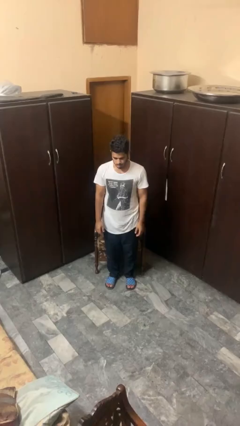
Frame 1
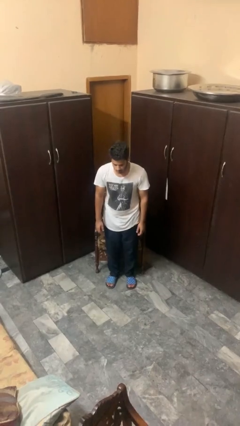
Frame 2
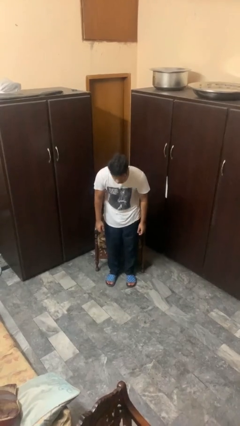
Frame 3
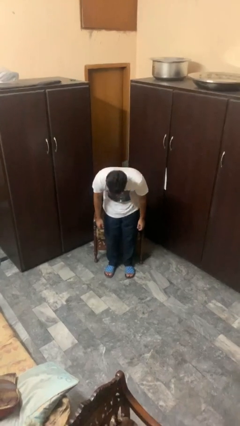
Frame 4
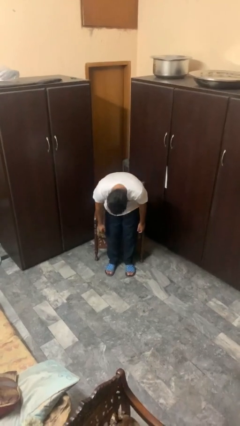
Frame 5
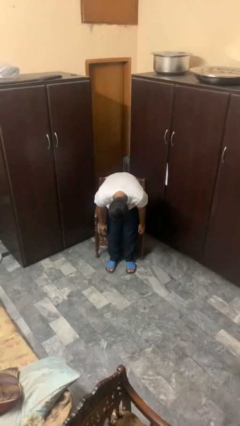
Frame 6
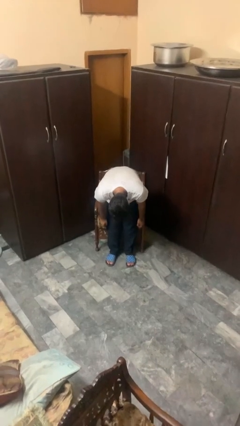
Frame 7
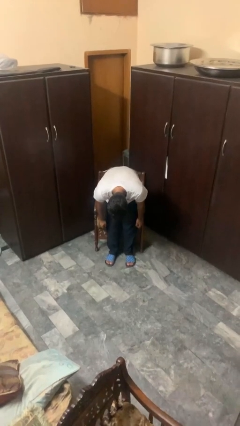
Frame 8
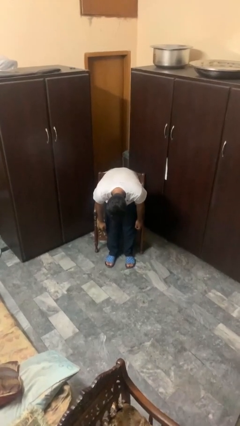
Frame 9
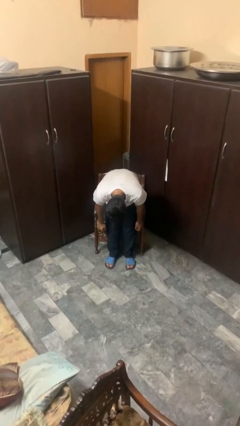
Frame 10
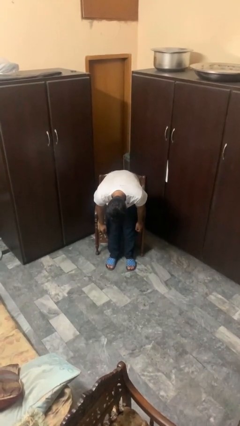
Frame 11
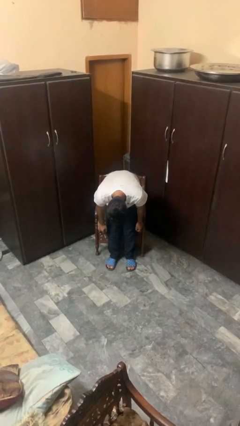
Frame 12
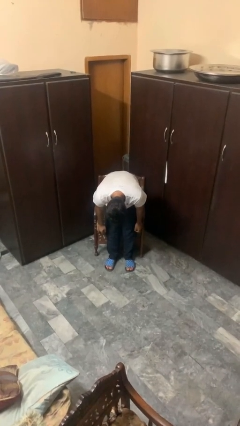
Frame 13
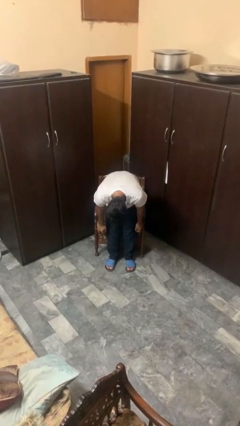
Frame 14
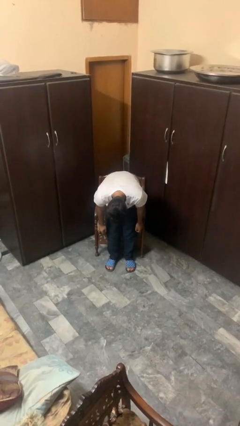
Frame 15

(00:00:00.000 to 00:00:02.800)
person bows

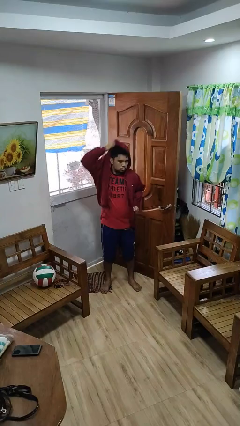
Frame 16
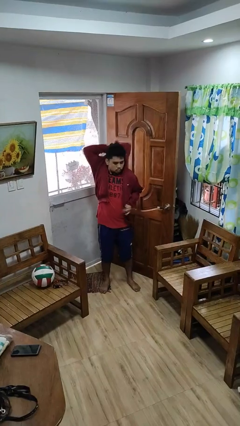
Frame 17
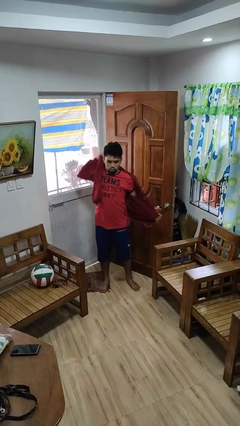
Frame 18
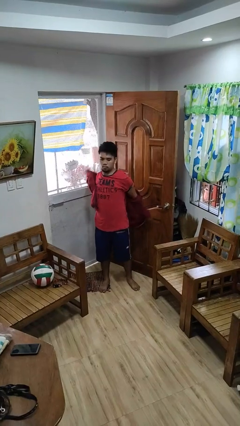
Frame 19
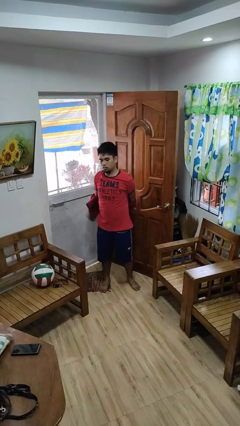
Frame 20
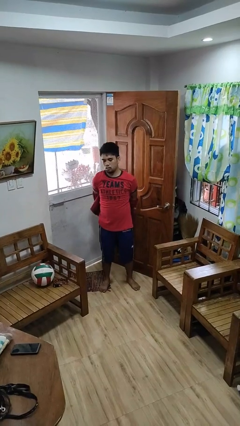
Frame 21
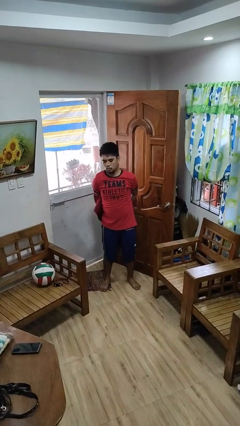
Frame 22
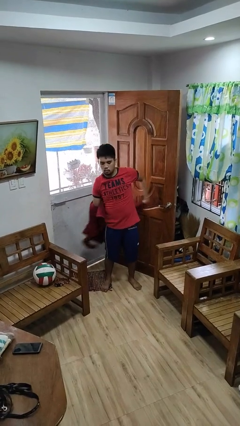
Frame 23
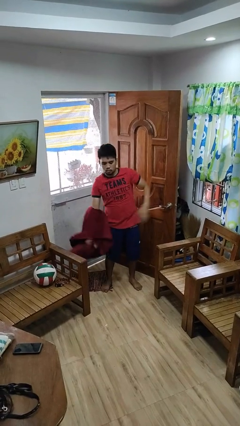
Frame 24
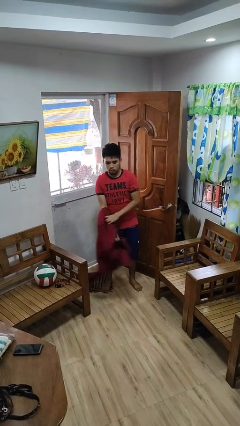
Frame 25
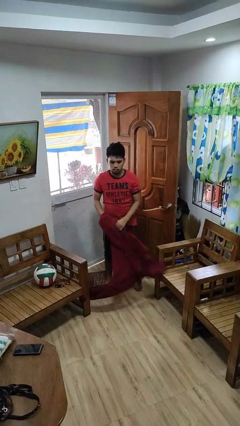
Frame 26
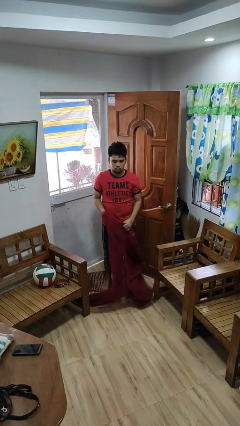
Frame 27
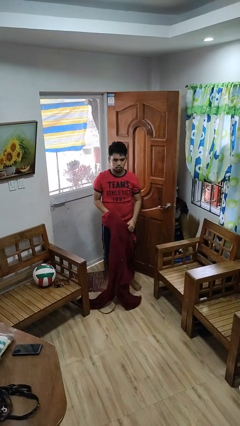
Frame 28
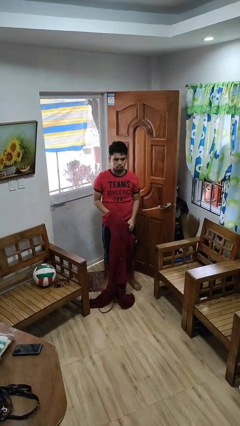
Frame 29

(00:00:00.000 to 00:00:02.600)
person takes off hoodie

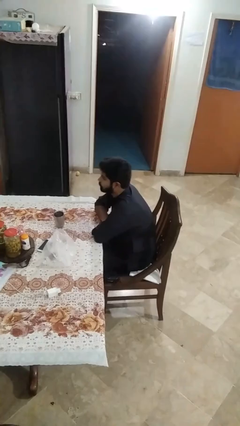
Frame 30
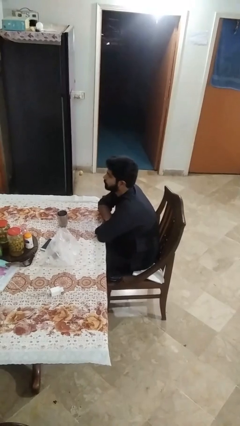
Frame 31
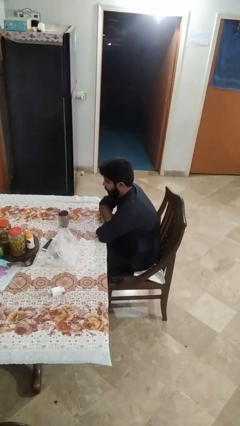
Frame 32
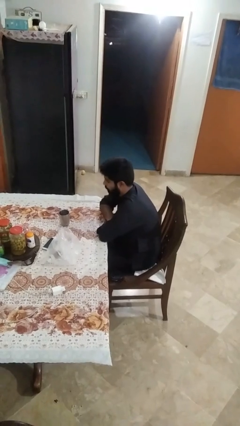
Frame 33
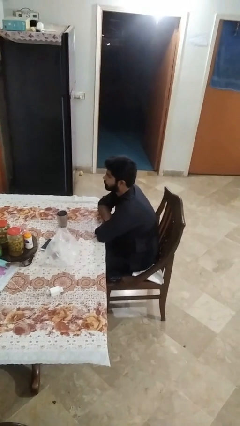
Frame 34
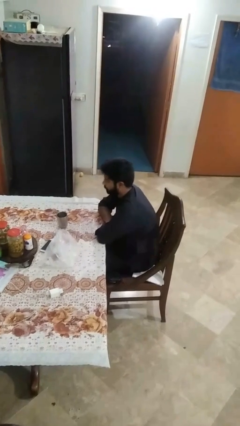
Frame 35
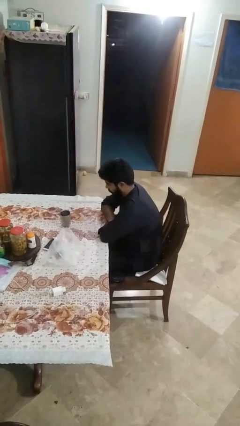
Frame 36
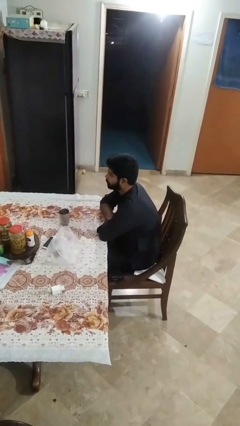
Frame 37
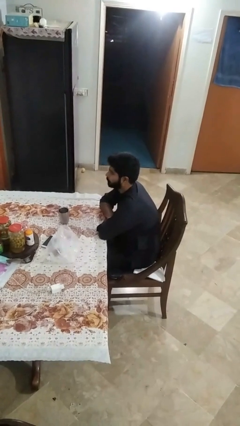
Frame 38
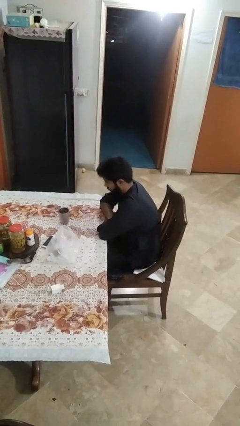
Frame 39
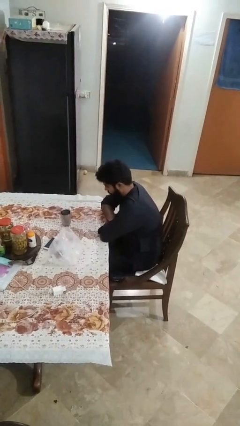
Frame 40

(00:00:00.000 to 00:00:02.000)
person nods head

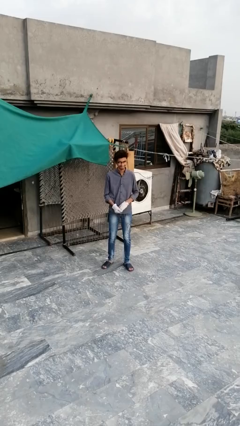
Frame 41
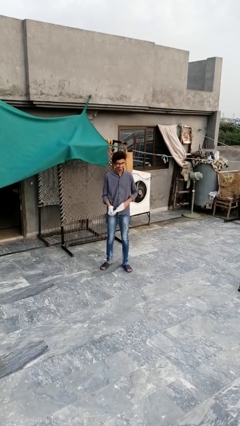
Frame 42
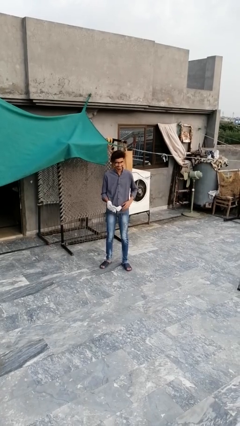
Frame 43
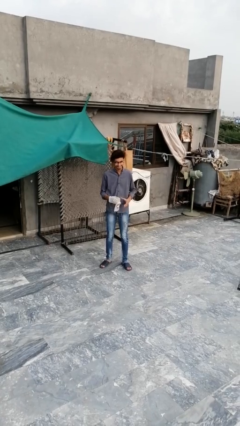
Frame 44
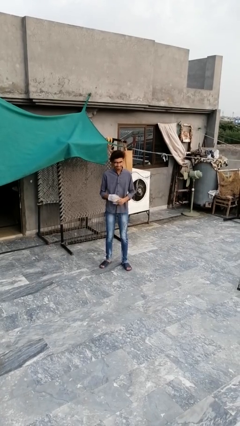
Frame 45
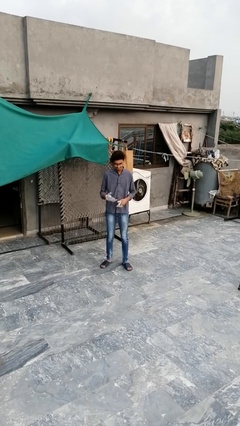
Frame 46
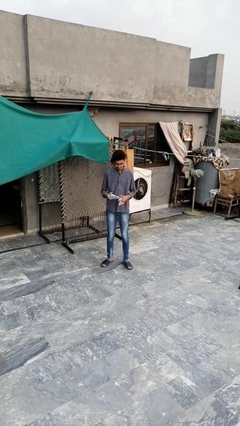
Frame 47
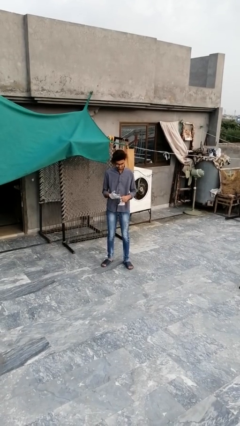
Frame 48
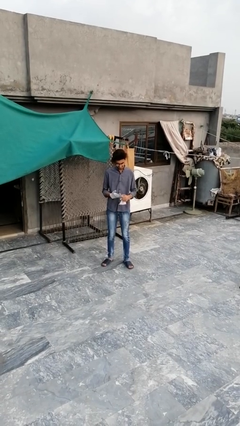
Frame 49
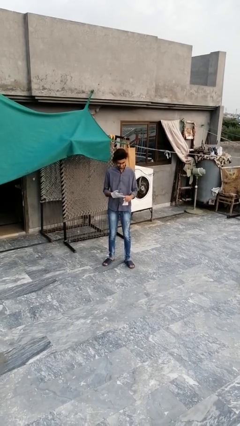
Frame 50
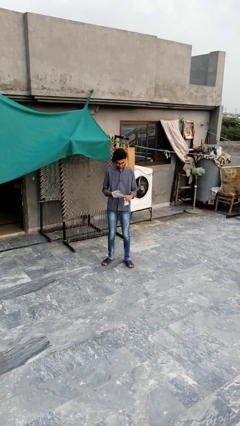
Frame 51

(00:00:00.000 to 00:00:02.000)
person takes off gloves

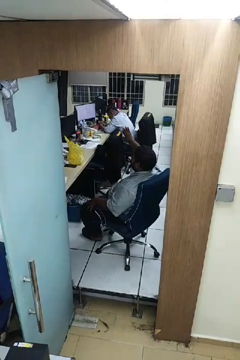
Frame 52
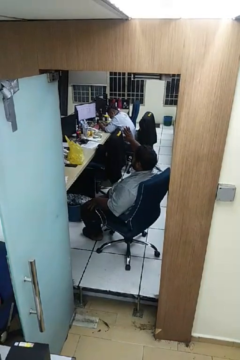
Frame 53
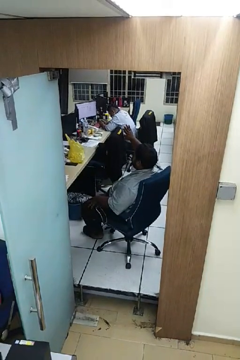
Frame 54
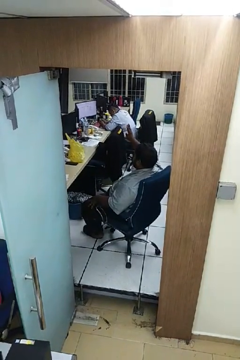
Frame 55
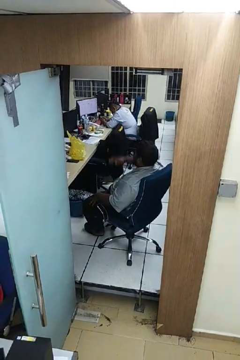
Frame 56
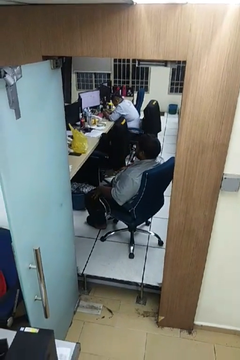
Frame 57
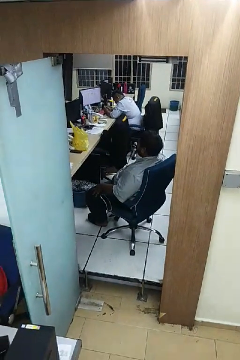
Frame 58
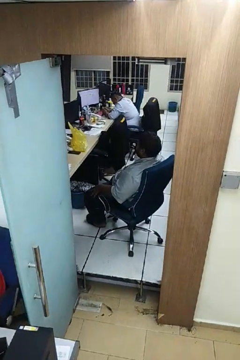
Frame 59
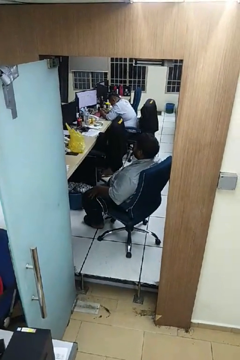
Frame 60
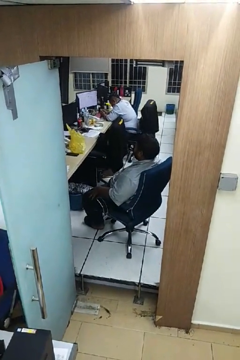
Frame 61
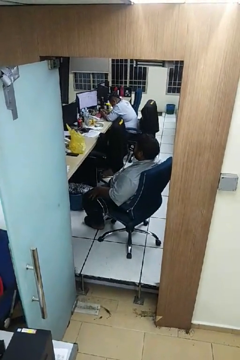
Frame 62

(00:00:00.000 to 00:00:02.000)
person gestures swipe down

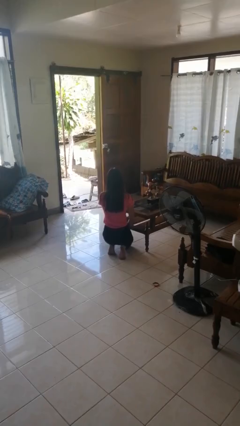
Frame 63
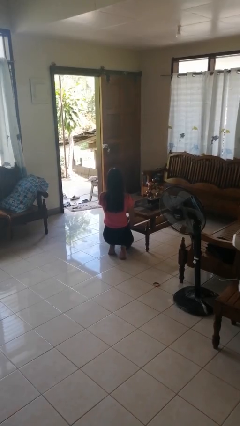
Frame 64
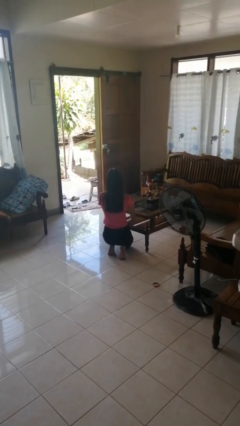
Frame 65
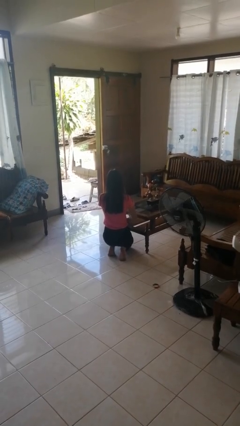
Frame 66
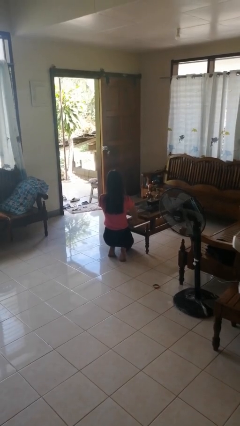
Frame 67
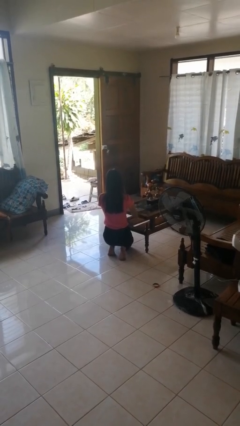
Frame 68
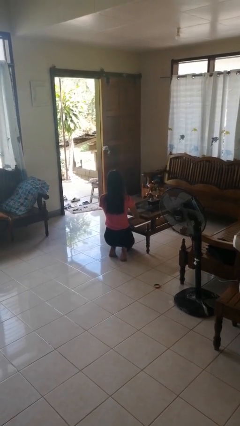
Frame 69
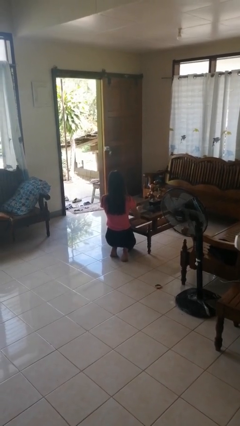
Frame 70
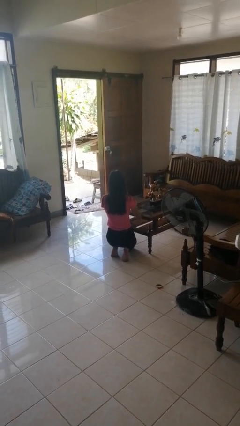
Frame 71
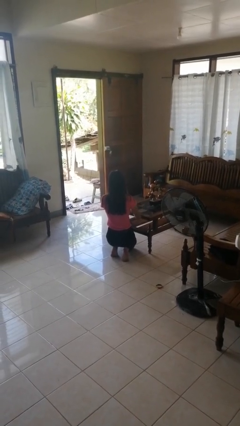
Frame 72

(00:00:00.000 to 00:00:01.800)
person cleans table with rag

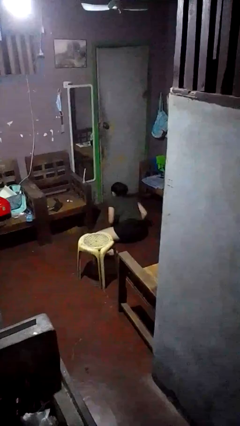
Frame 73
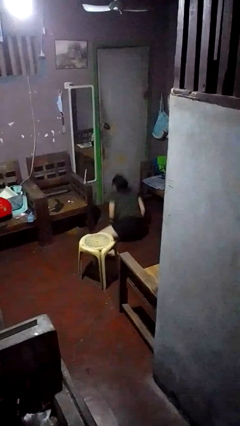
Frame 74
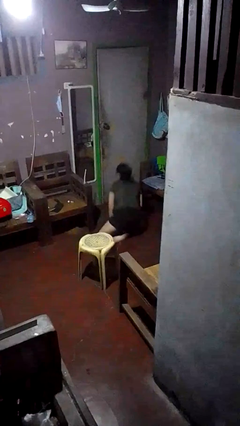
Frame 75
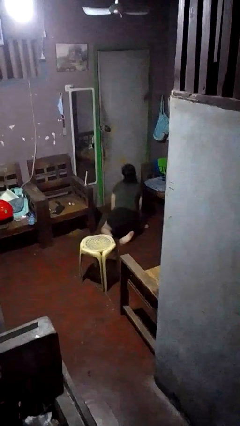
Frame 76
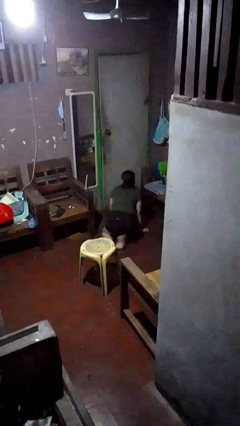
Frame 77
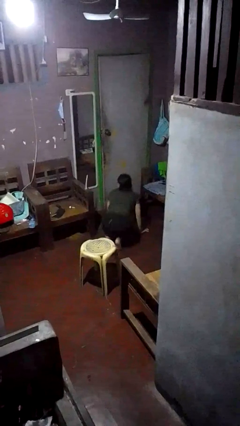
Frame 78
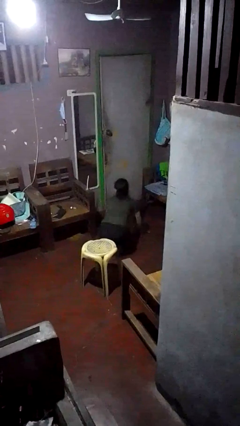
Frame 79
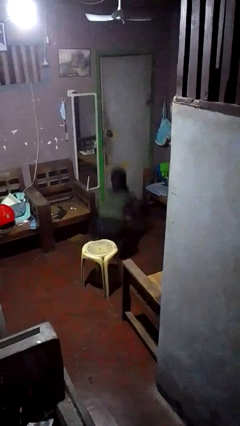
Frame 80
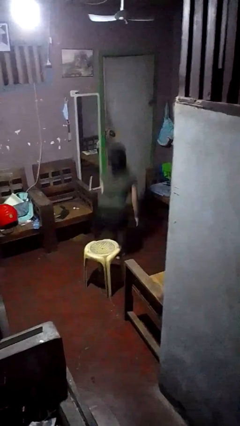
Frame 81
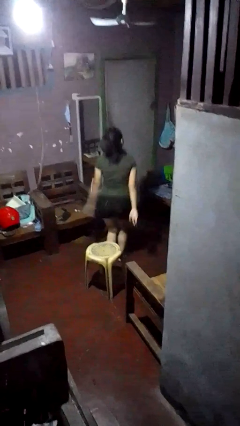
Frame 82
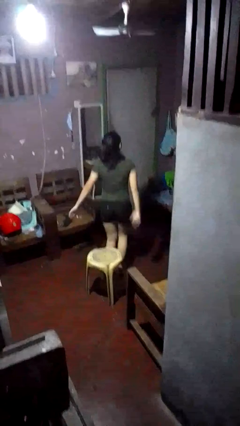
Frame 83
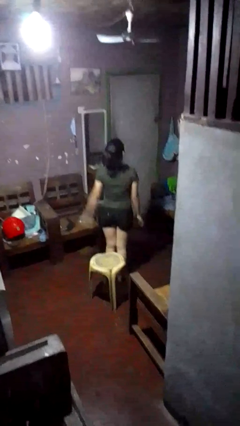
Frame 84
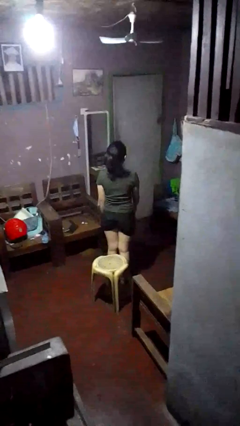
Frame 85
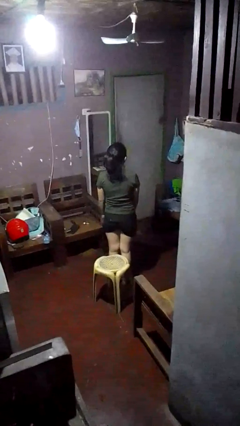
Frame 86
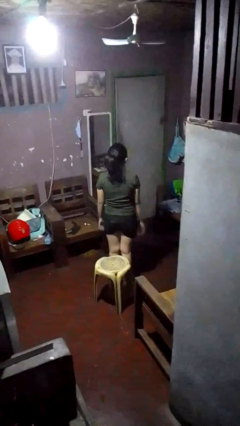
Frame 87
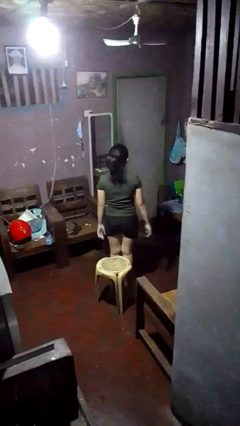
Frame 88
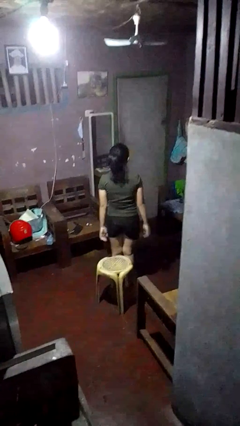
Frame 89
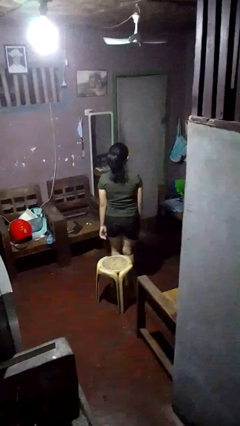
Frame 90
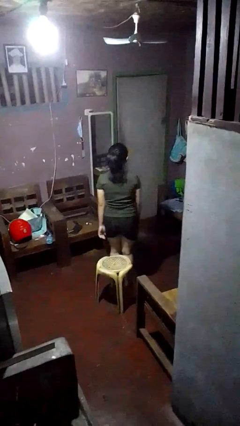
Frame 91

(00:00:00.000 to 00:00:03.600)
person stands up from floor
